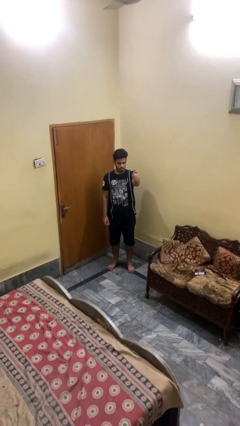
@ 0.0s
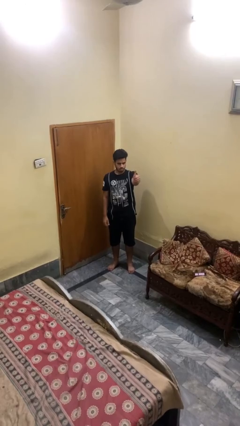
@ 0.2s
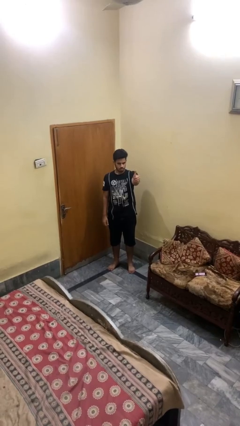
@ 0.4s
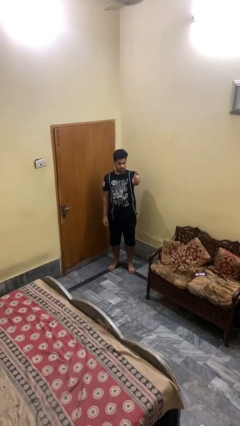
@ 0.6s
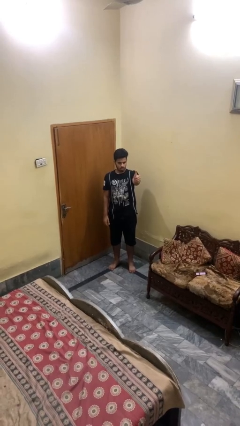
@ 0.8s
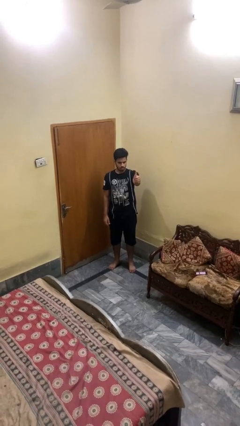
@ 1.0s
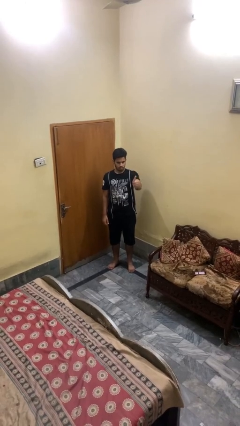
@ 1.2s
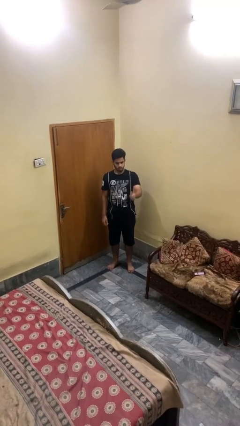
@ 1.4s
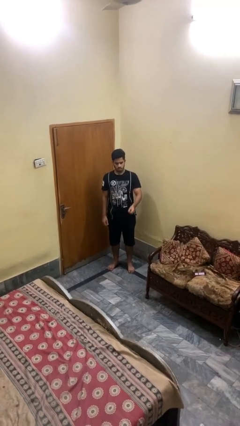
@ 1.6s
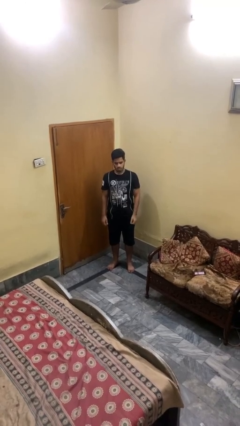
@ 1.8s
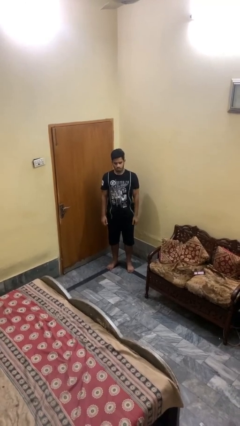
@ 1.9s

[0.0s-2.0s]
person gestures thumbs up

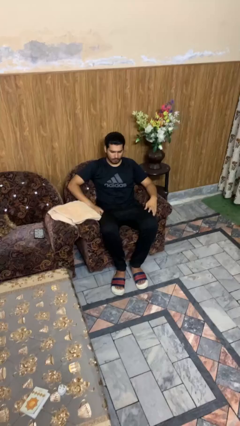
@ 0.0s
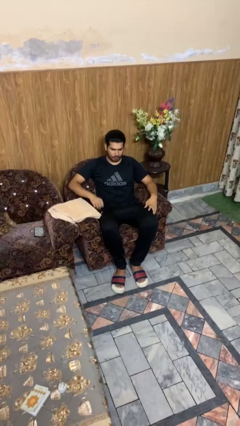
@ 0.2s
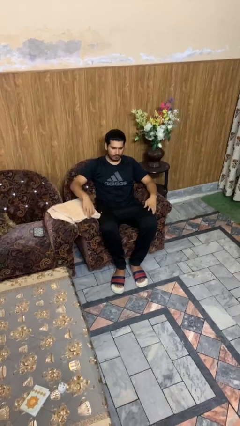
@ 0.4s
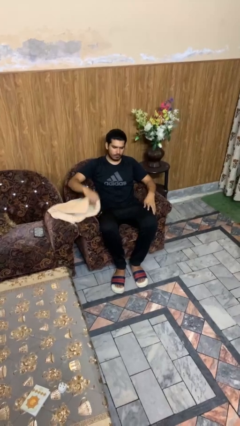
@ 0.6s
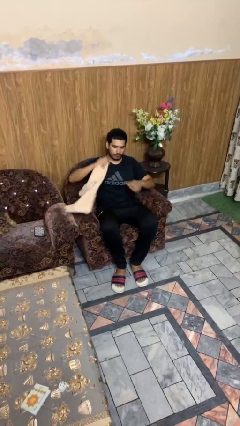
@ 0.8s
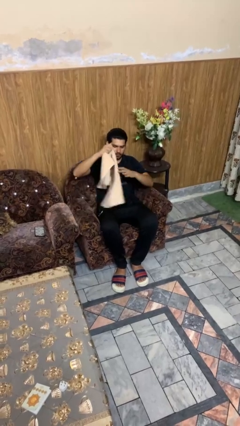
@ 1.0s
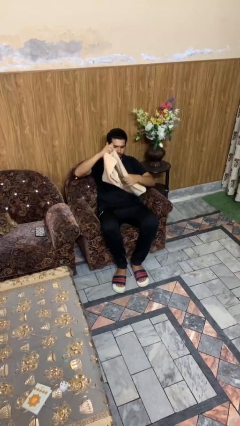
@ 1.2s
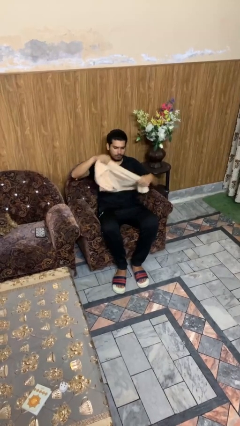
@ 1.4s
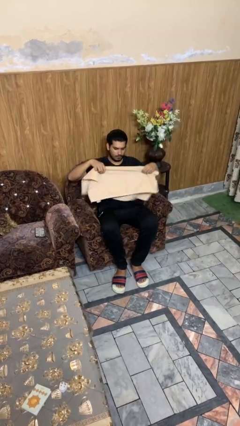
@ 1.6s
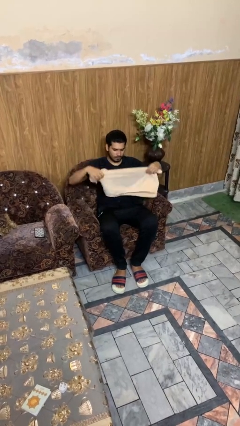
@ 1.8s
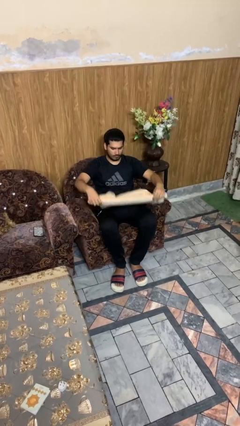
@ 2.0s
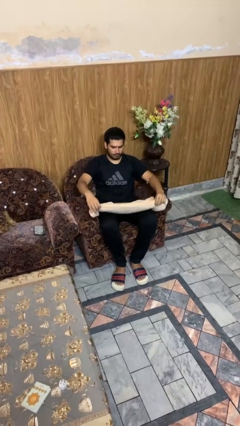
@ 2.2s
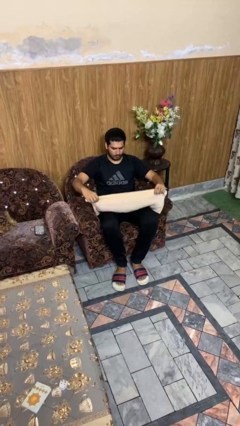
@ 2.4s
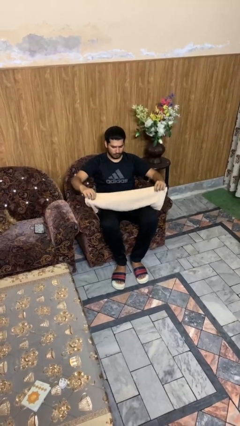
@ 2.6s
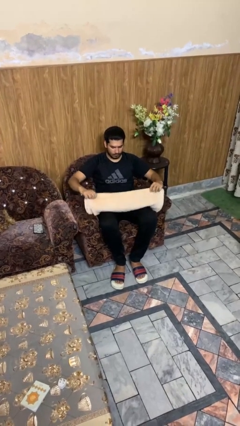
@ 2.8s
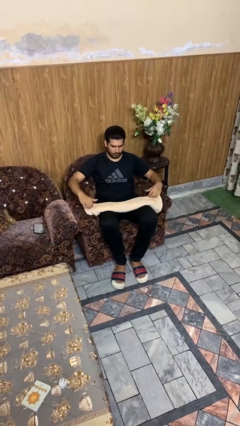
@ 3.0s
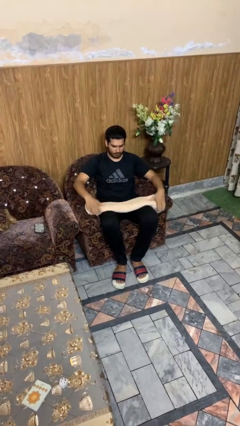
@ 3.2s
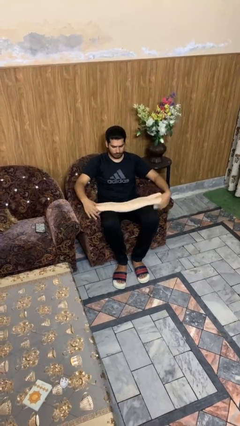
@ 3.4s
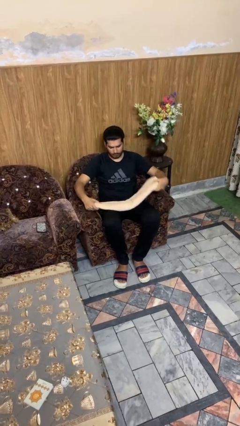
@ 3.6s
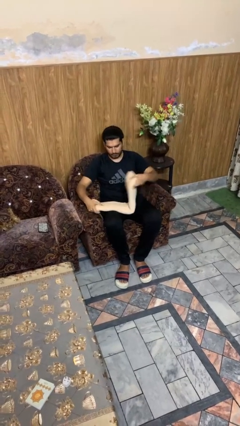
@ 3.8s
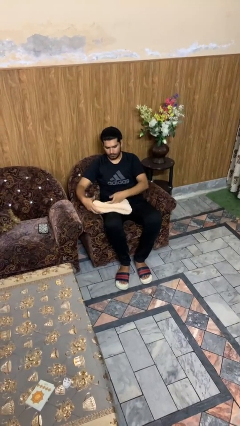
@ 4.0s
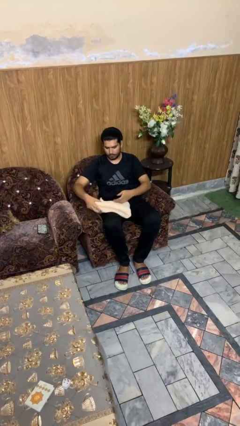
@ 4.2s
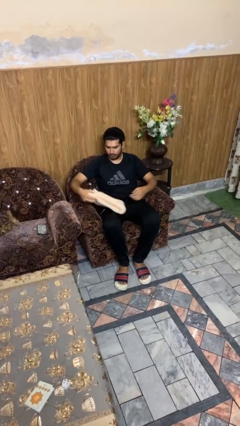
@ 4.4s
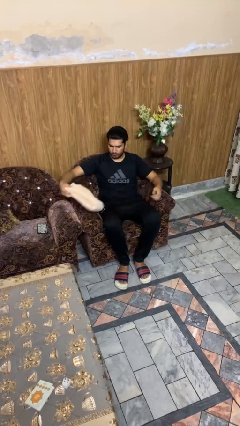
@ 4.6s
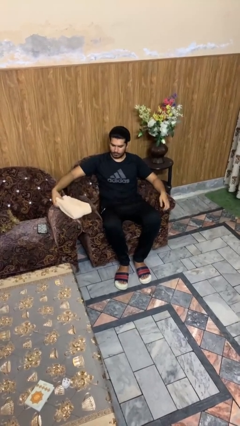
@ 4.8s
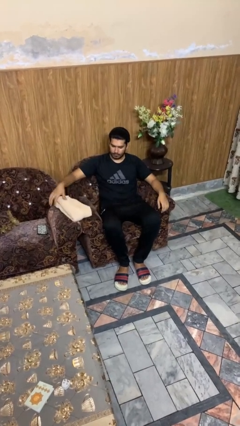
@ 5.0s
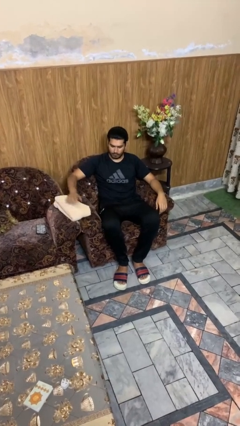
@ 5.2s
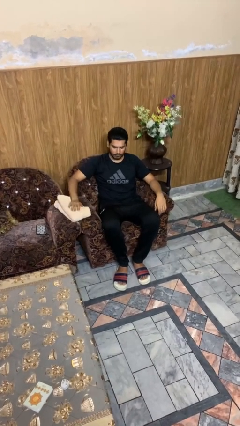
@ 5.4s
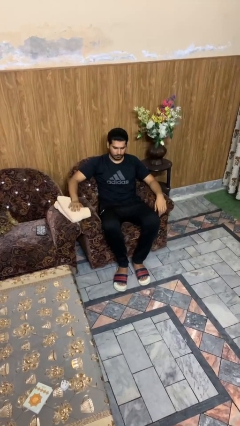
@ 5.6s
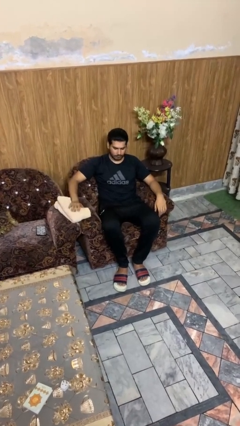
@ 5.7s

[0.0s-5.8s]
person folds towel

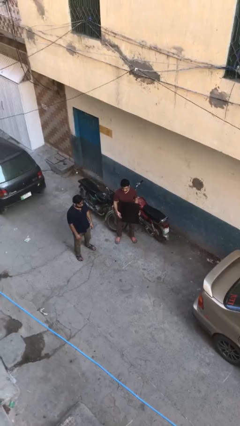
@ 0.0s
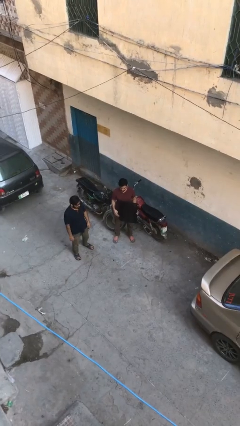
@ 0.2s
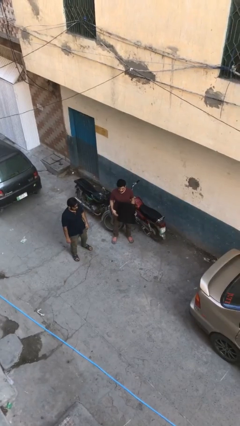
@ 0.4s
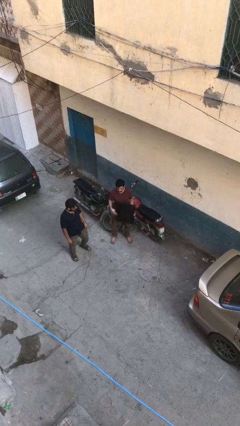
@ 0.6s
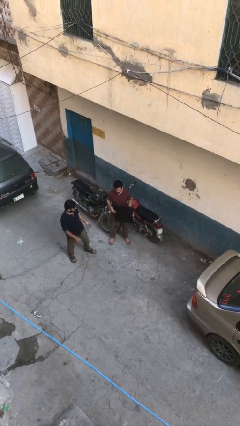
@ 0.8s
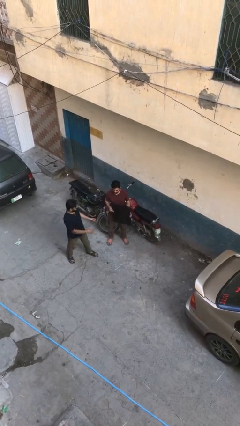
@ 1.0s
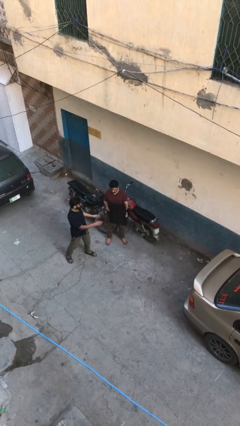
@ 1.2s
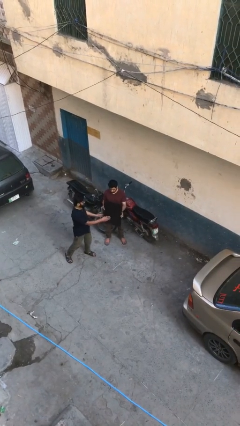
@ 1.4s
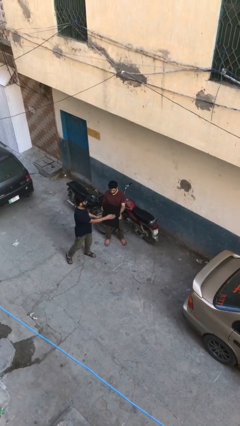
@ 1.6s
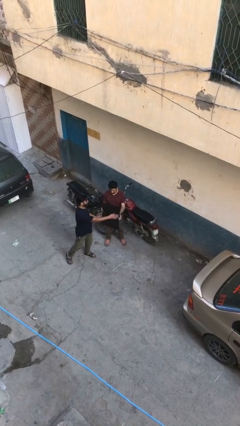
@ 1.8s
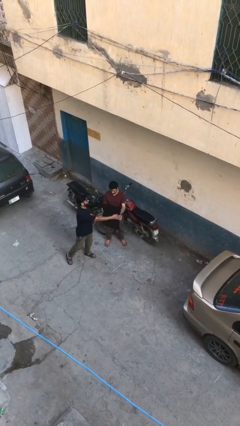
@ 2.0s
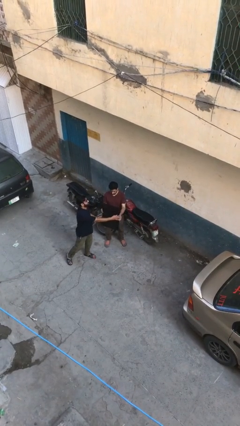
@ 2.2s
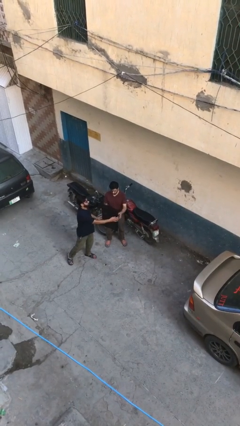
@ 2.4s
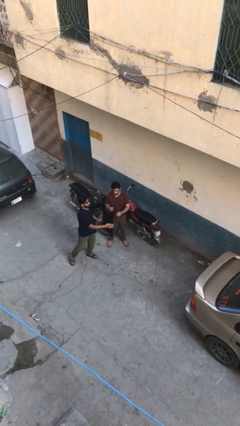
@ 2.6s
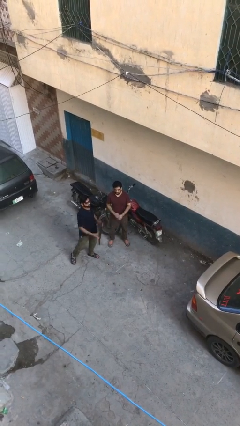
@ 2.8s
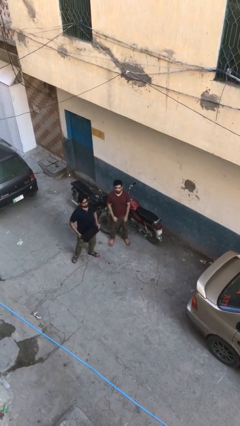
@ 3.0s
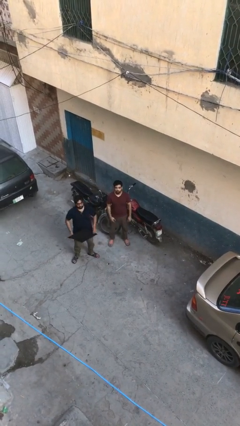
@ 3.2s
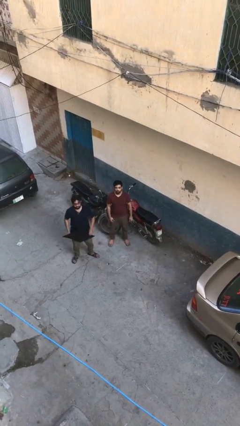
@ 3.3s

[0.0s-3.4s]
person transfers object to person

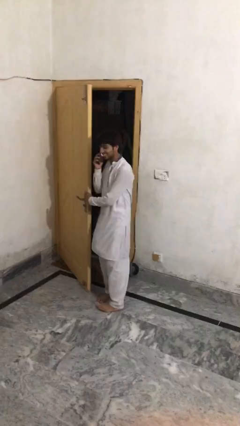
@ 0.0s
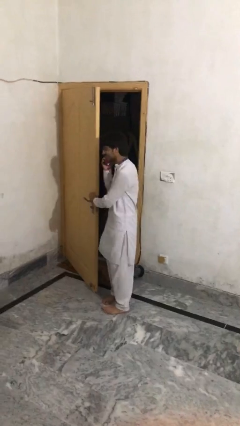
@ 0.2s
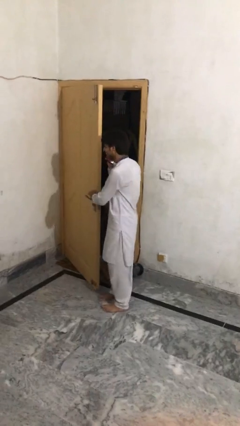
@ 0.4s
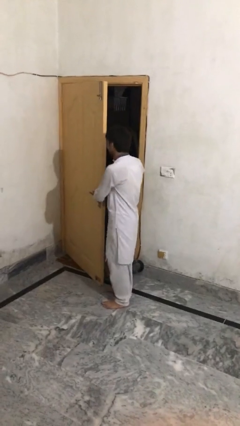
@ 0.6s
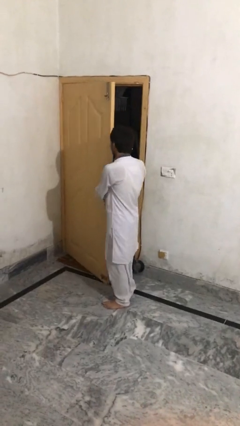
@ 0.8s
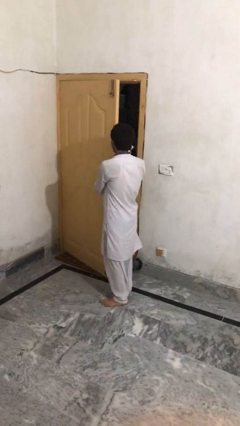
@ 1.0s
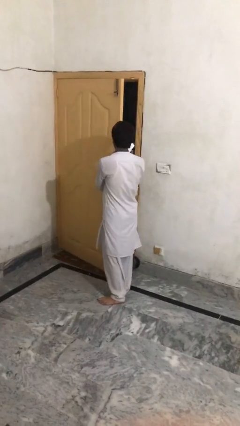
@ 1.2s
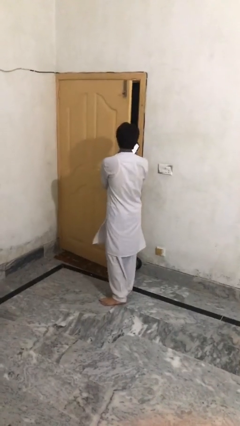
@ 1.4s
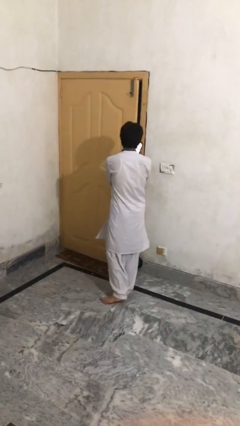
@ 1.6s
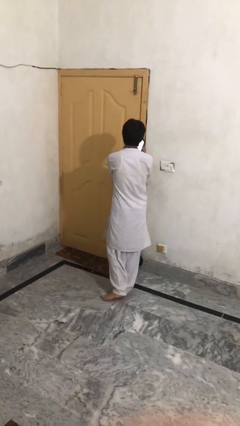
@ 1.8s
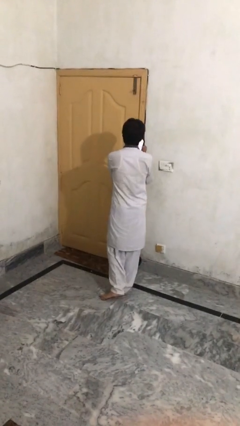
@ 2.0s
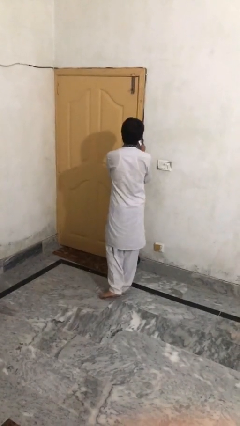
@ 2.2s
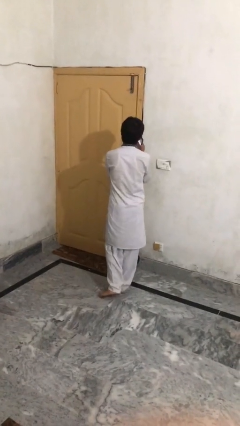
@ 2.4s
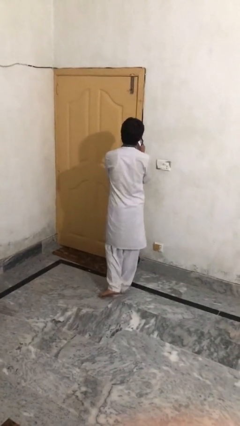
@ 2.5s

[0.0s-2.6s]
person closes facility door

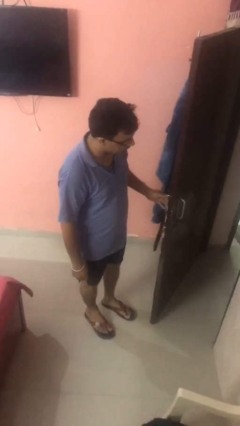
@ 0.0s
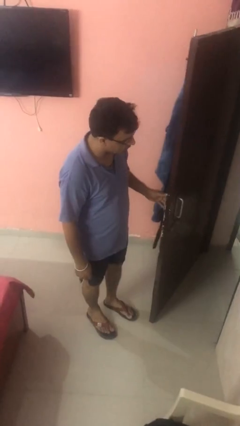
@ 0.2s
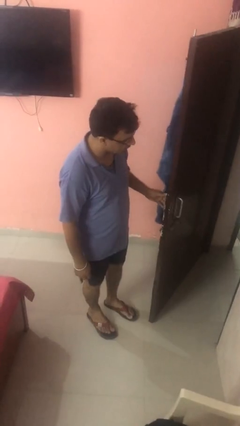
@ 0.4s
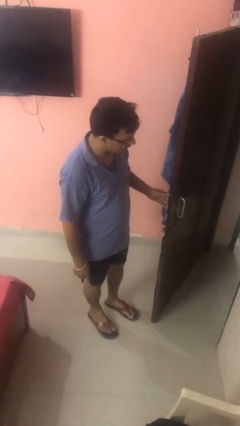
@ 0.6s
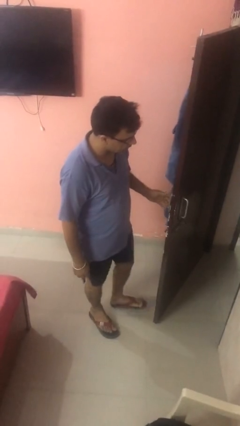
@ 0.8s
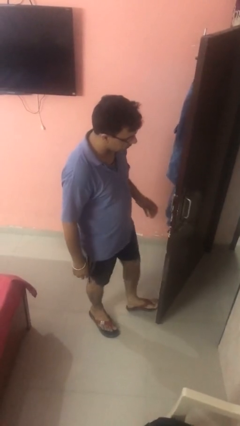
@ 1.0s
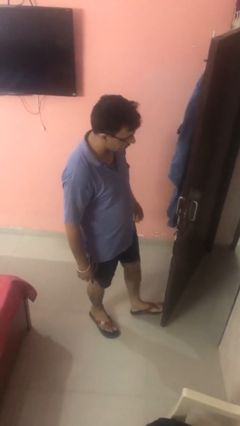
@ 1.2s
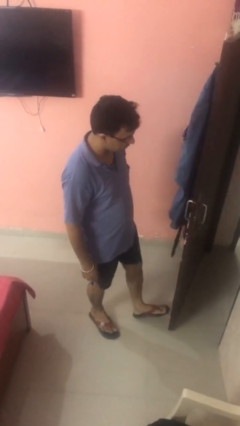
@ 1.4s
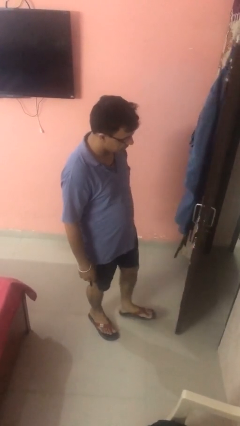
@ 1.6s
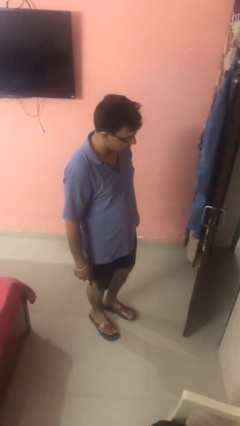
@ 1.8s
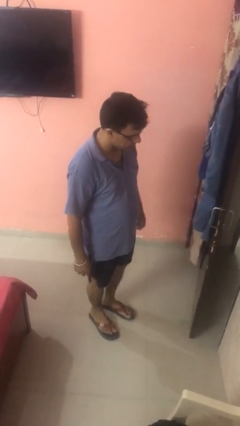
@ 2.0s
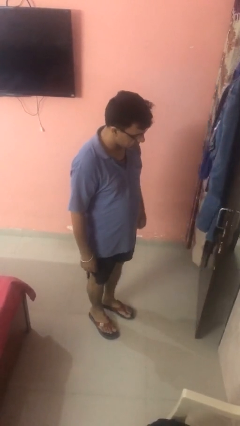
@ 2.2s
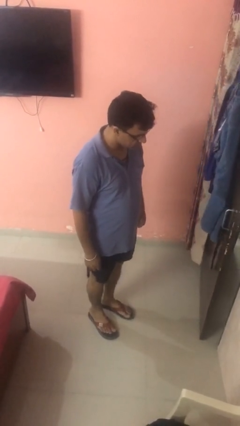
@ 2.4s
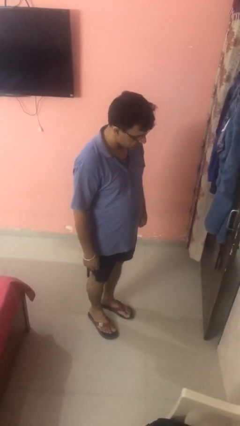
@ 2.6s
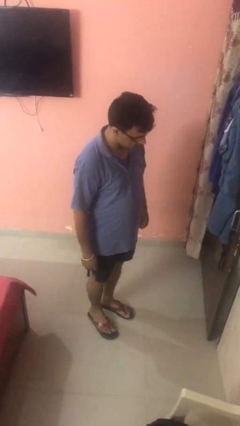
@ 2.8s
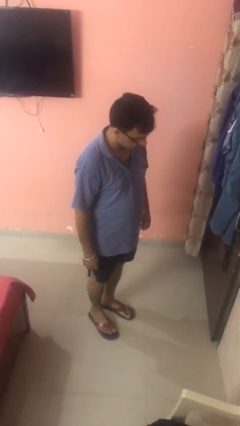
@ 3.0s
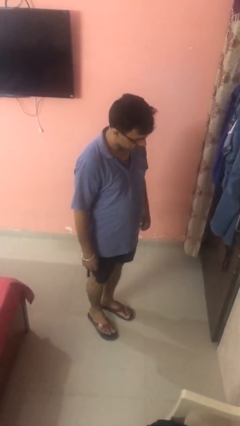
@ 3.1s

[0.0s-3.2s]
person closes door with foot

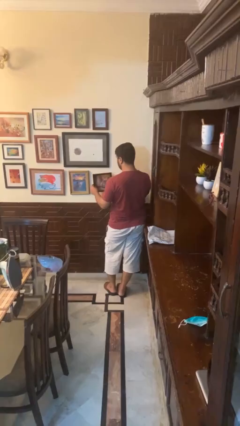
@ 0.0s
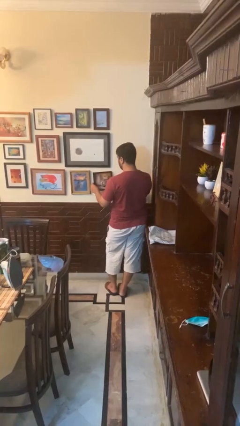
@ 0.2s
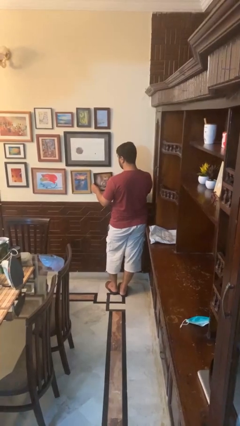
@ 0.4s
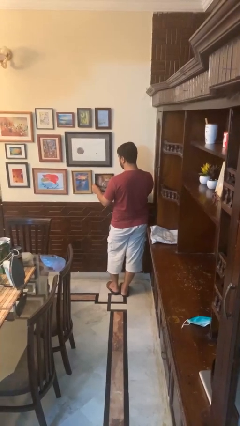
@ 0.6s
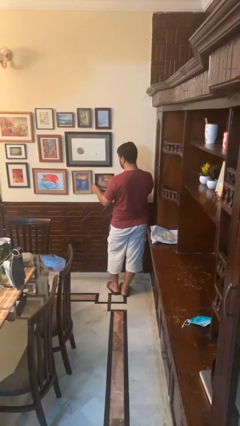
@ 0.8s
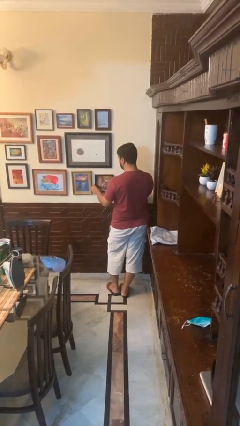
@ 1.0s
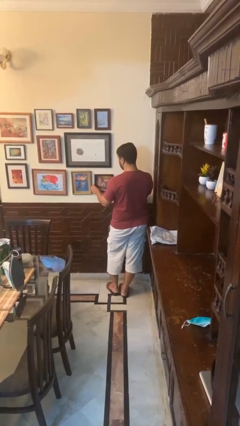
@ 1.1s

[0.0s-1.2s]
person puts up picture frame
